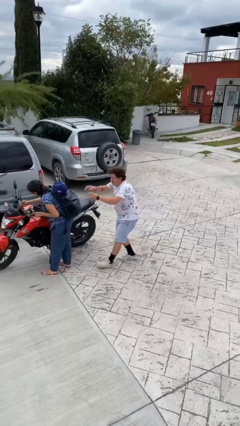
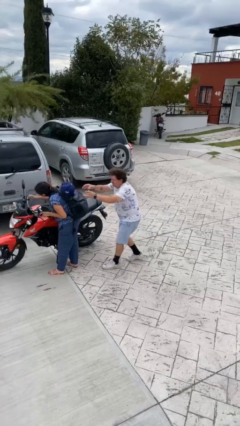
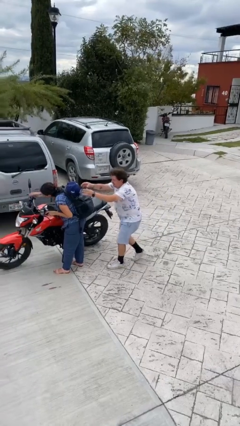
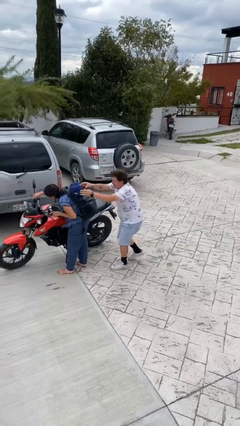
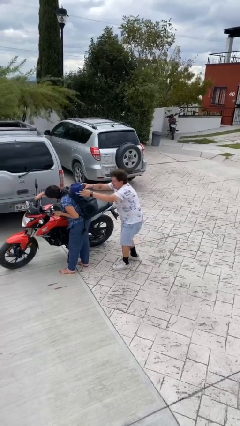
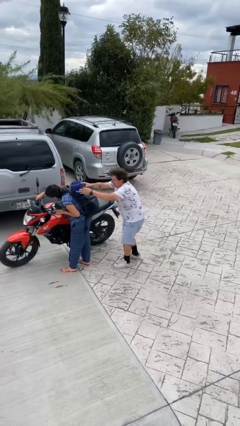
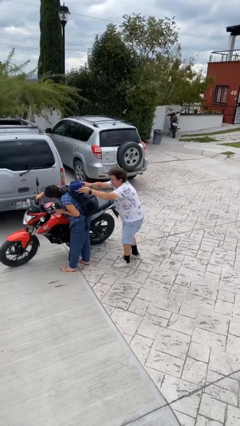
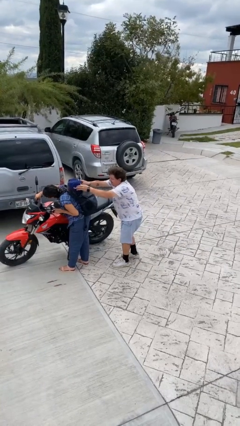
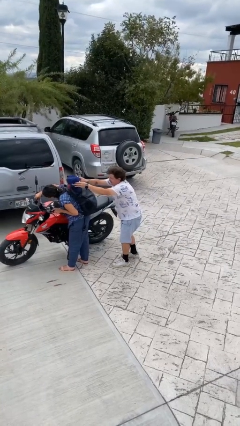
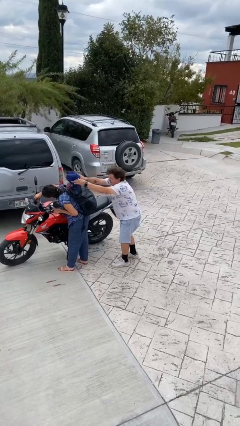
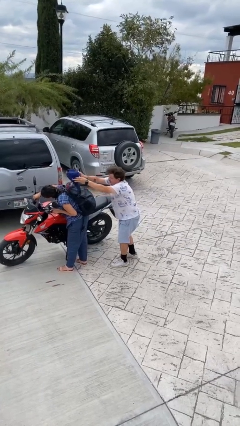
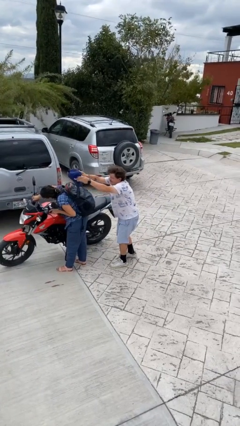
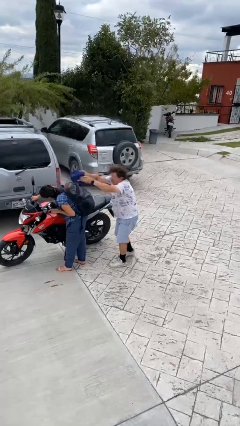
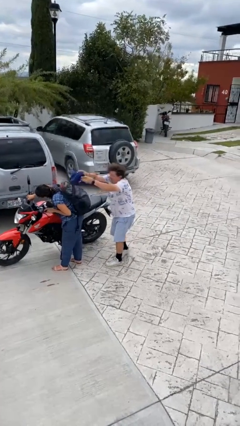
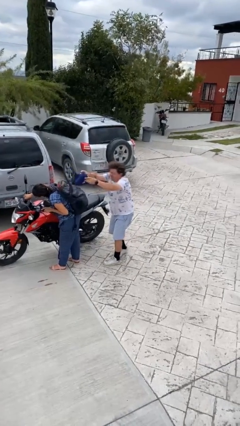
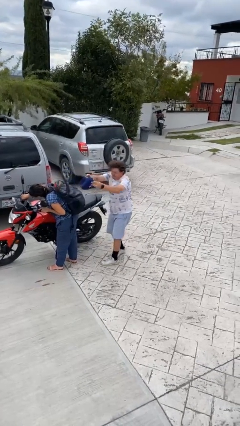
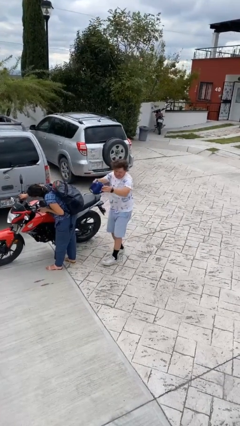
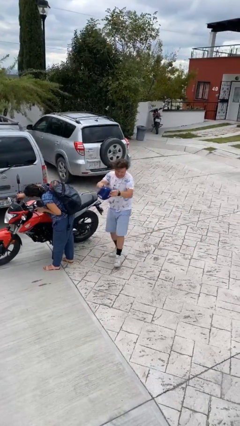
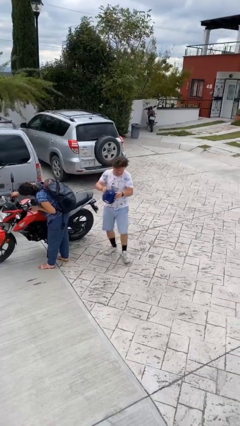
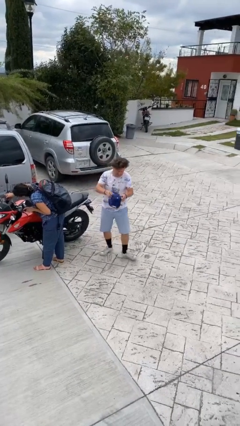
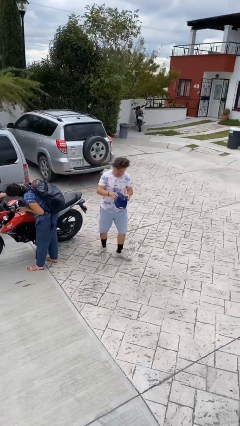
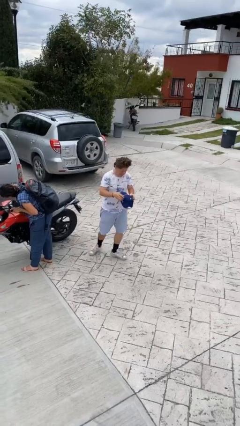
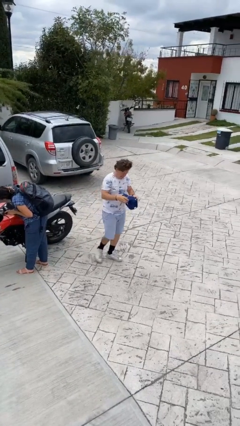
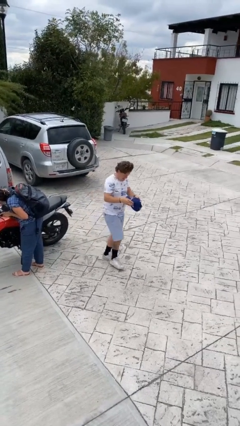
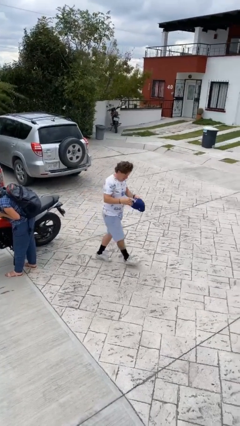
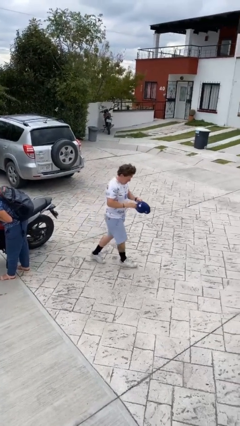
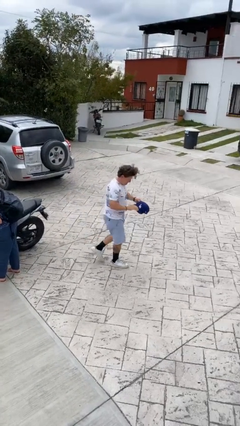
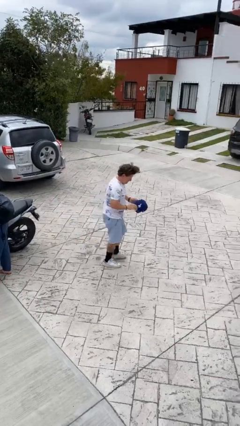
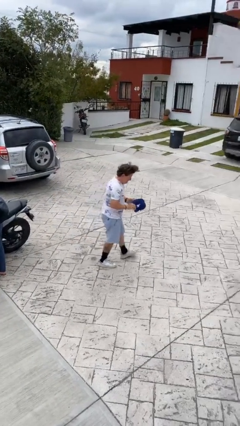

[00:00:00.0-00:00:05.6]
person steals object from person

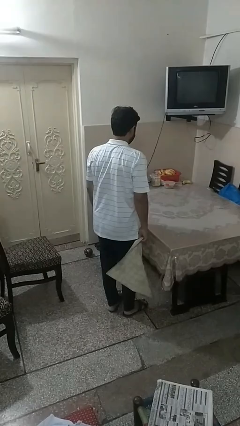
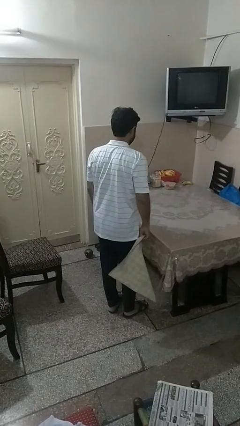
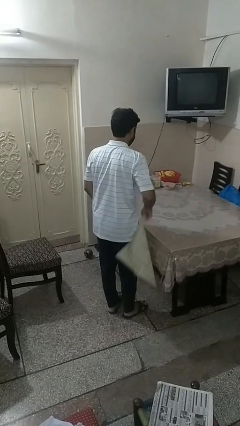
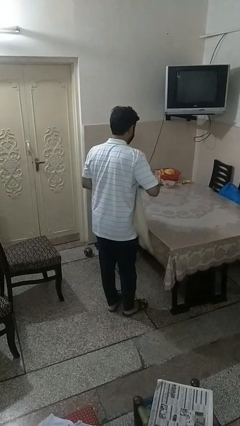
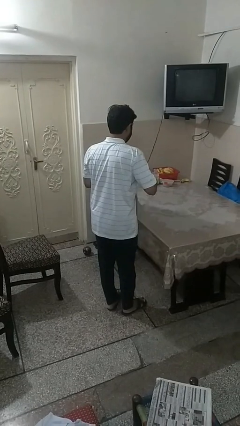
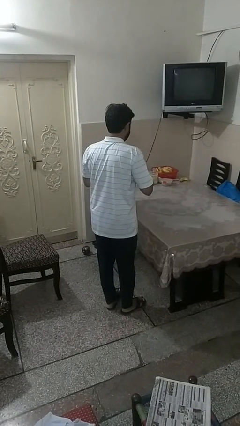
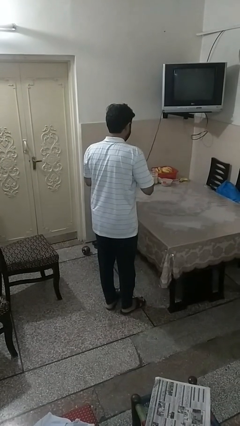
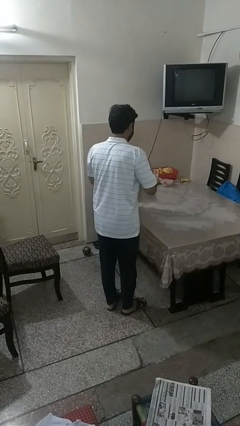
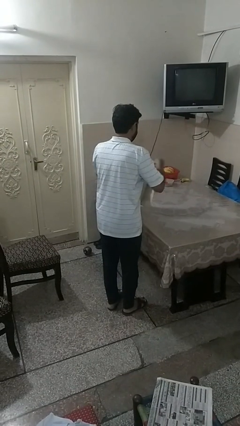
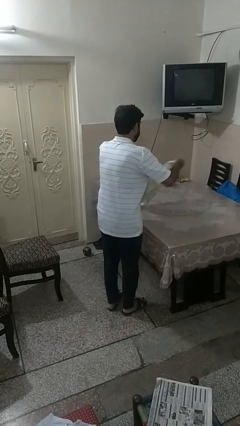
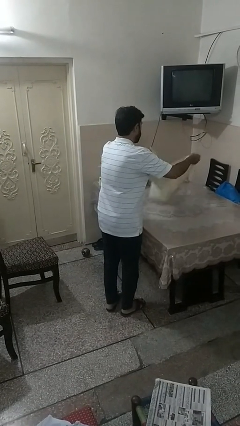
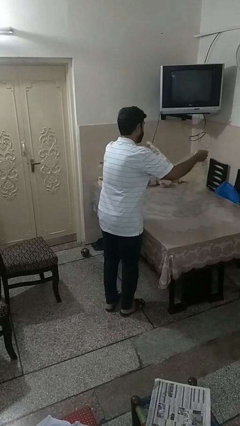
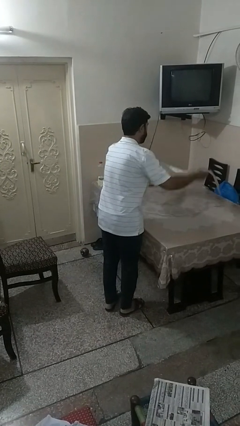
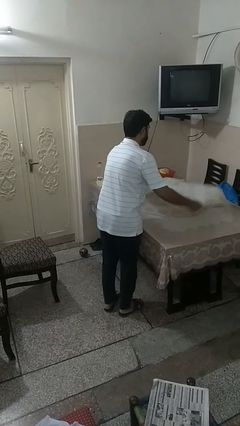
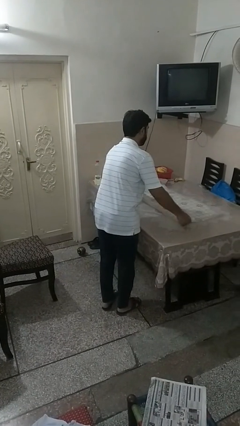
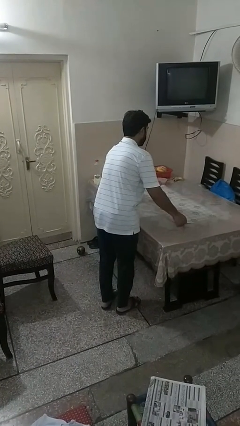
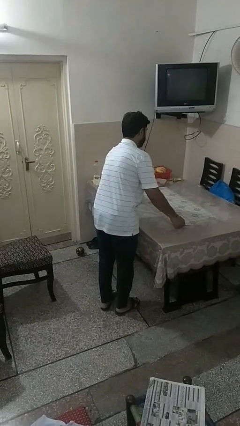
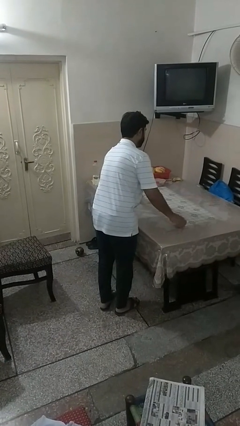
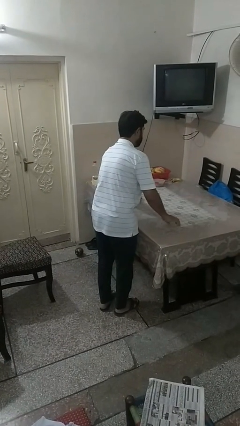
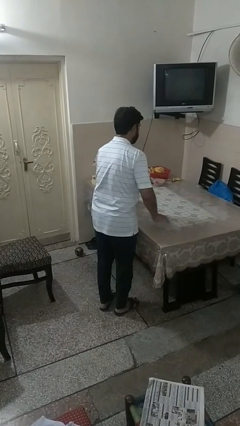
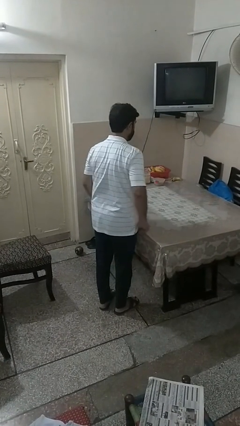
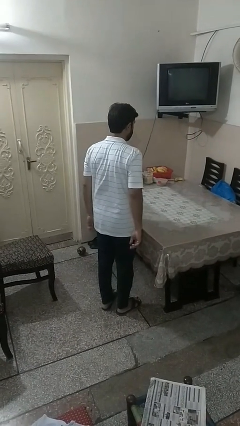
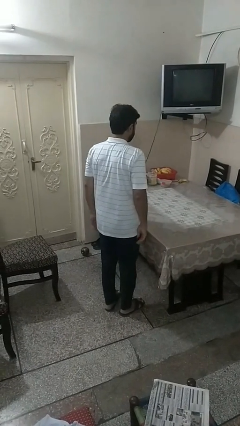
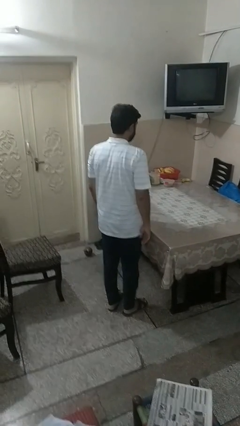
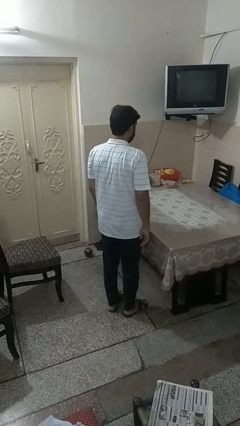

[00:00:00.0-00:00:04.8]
person spreads tablecloth

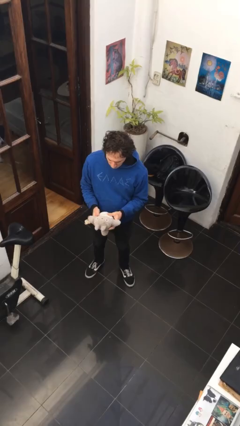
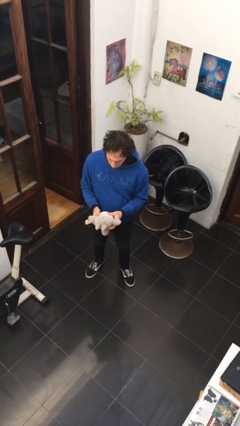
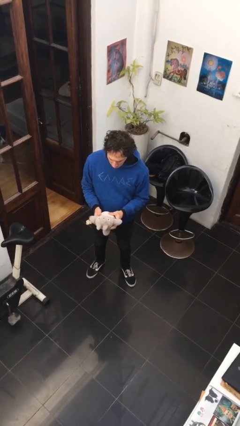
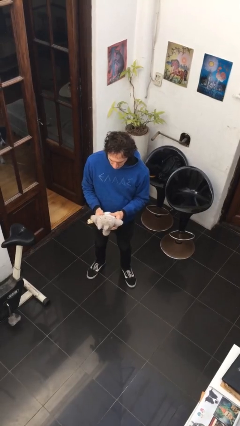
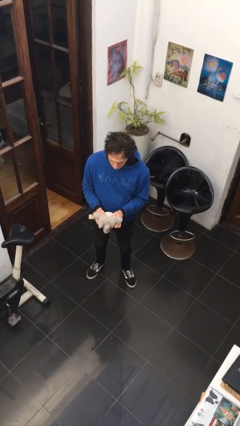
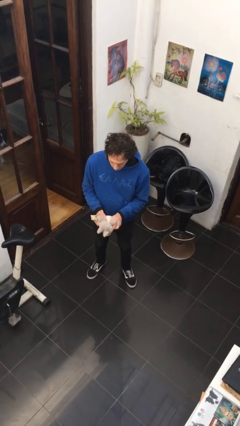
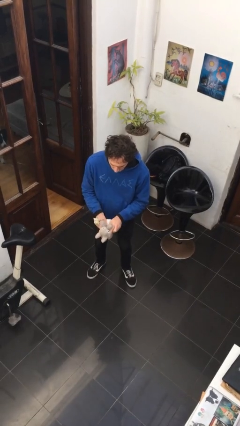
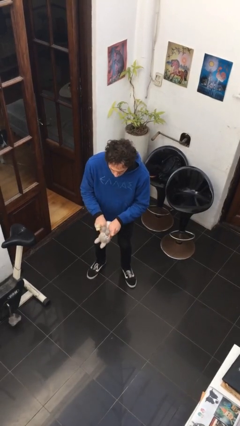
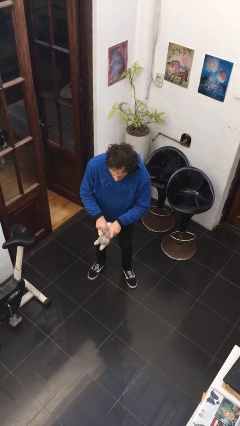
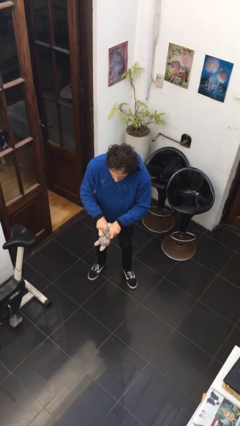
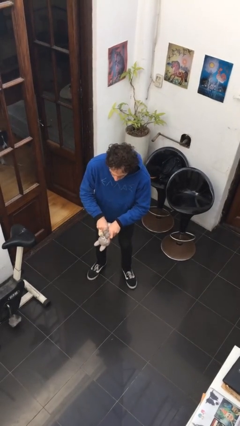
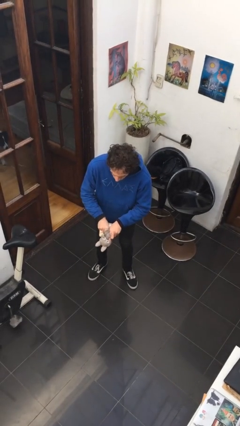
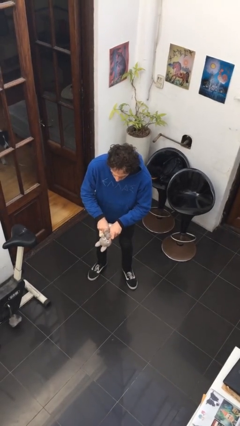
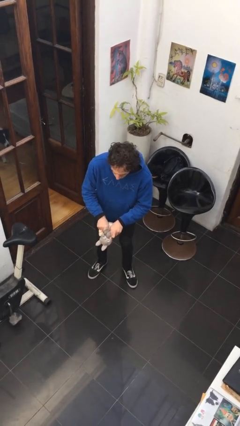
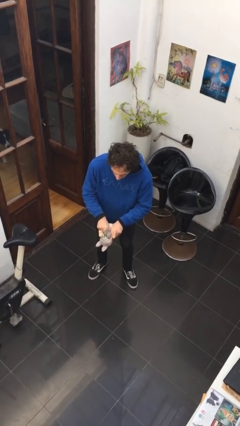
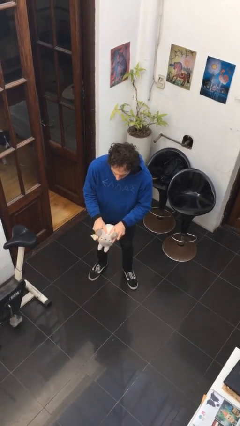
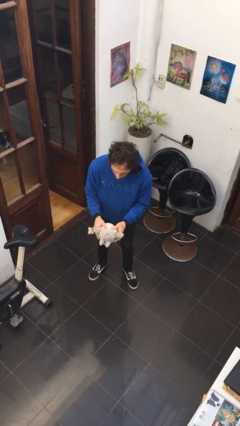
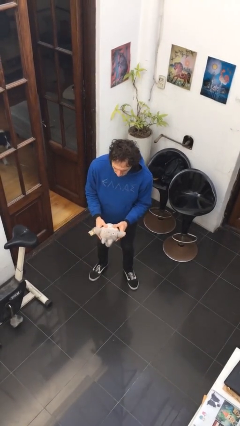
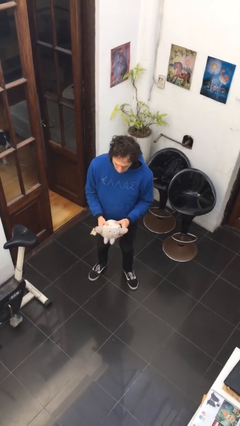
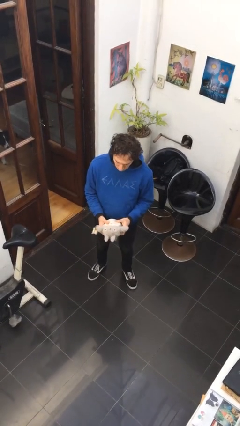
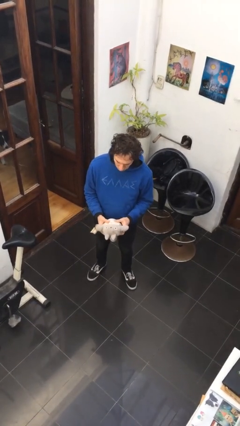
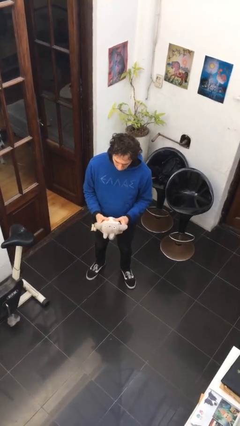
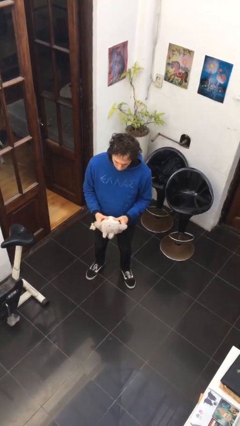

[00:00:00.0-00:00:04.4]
person squeezes object

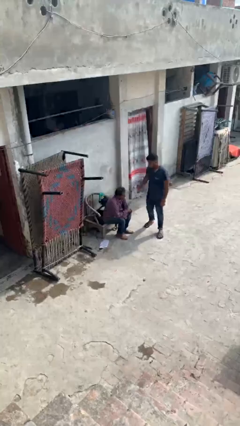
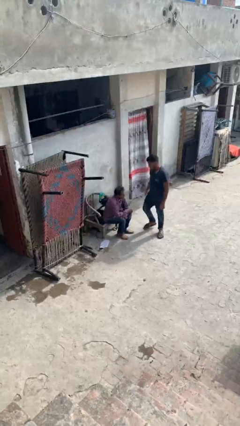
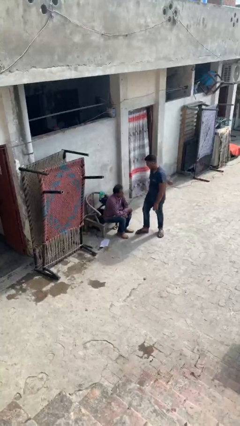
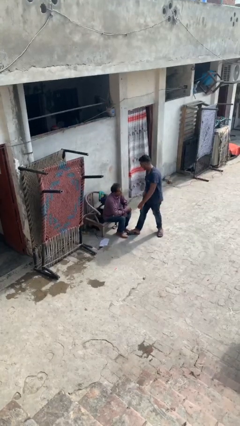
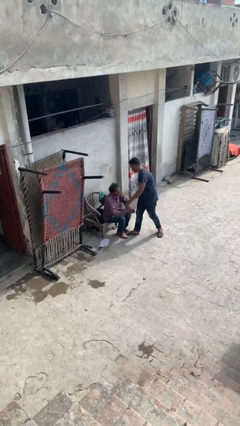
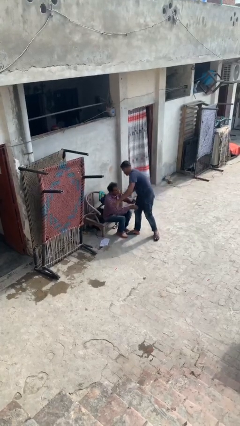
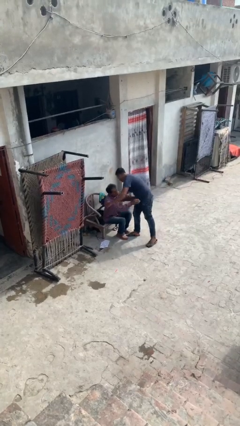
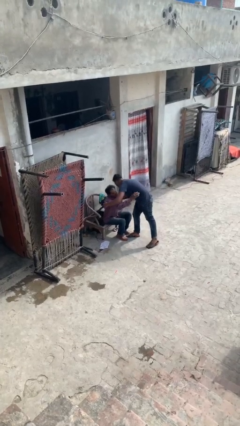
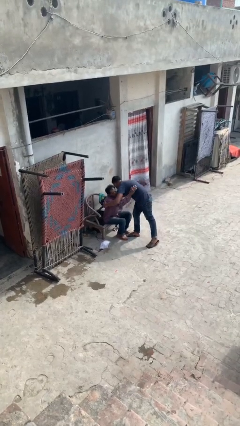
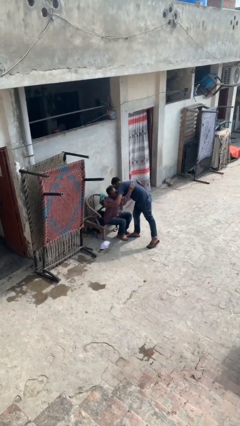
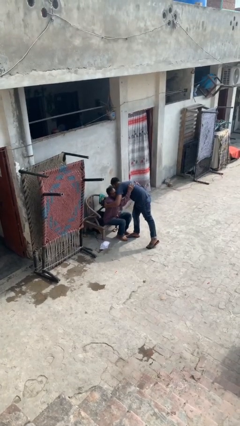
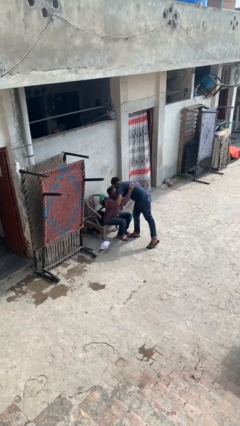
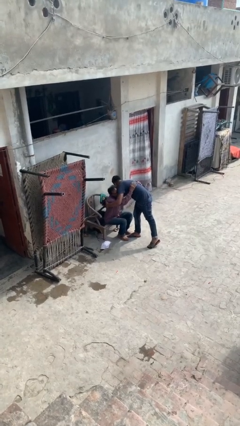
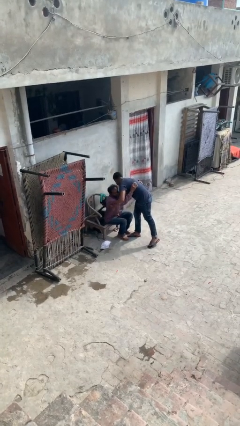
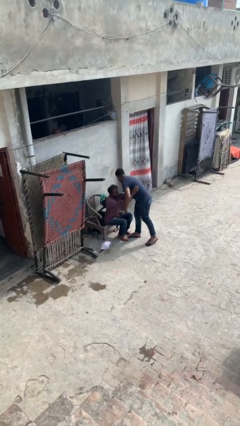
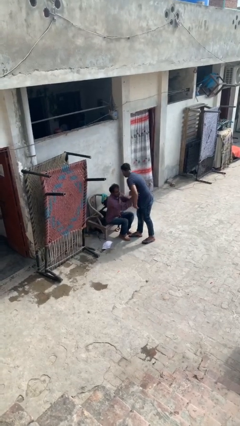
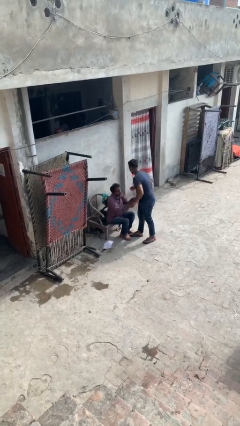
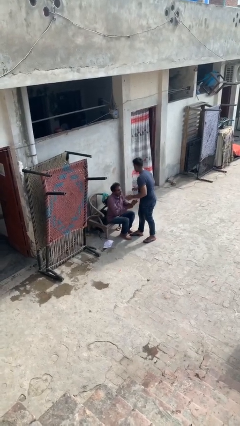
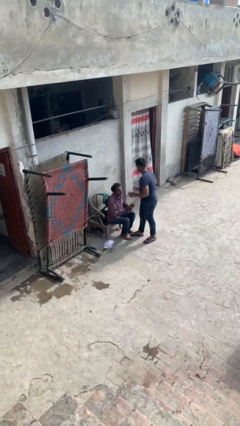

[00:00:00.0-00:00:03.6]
person embraces person
